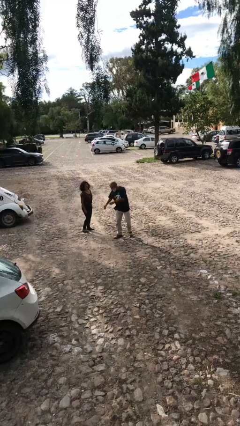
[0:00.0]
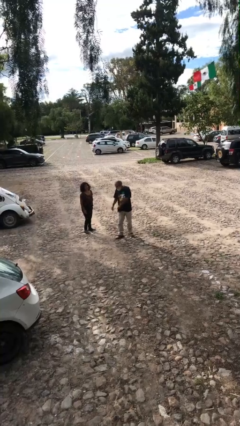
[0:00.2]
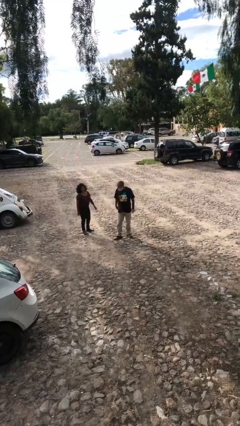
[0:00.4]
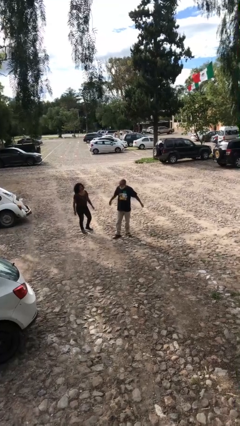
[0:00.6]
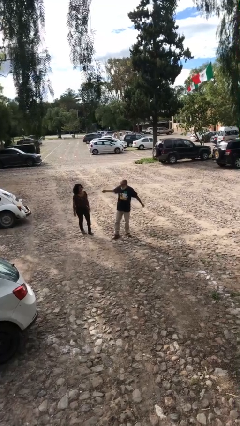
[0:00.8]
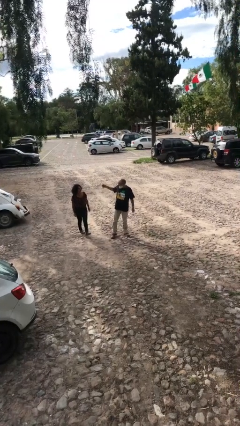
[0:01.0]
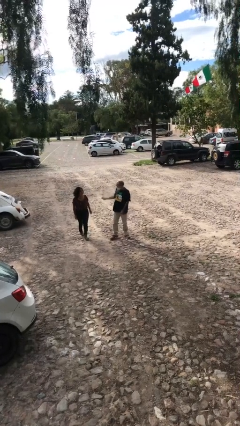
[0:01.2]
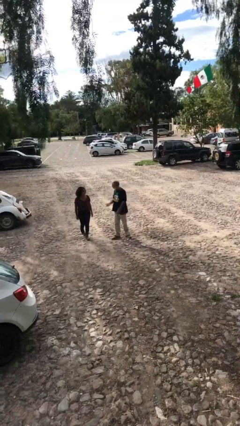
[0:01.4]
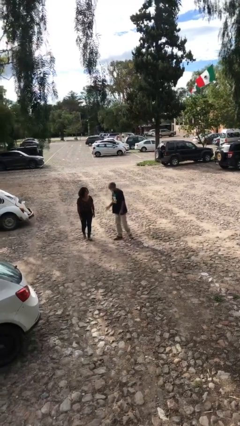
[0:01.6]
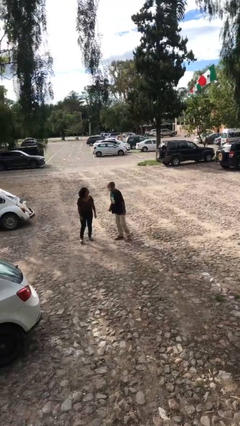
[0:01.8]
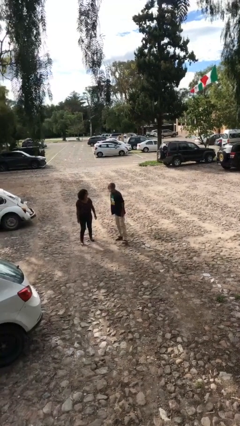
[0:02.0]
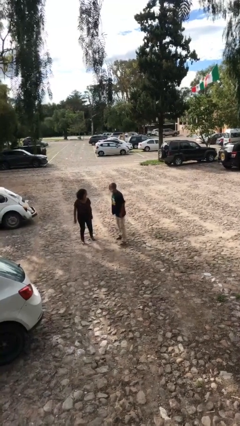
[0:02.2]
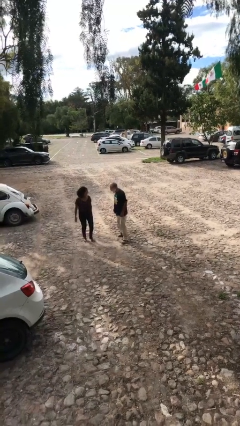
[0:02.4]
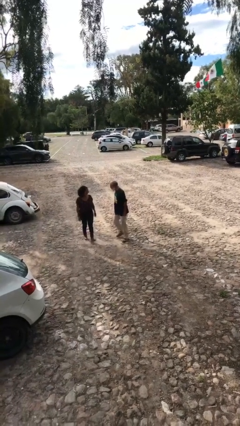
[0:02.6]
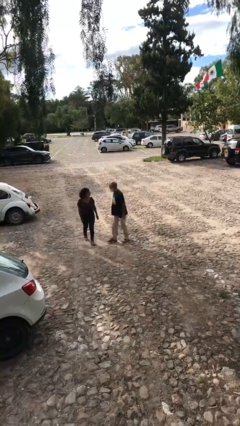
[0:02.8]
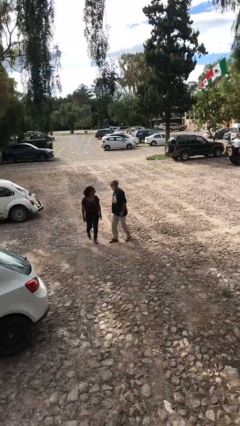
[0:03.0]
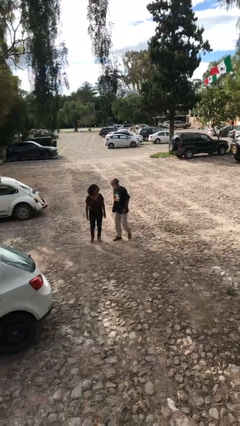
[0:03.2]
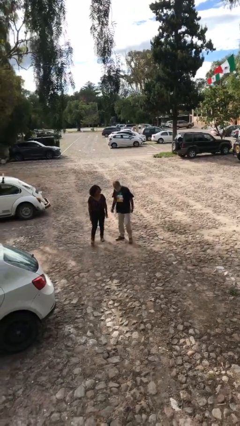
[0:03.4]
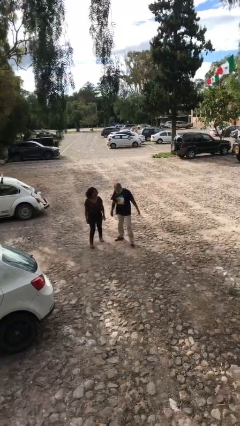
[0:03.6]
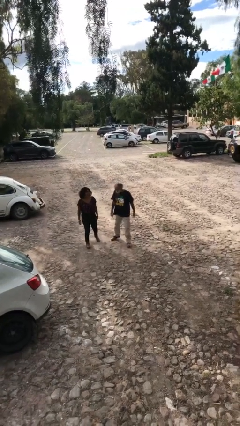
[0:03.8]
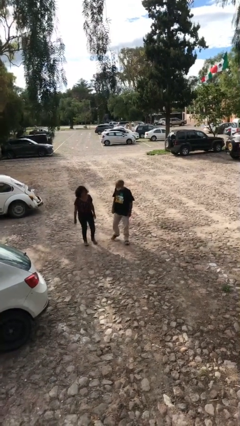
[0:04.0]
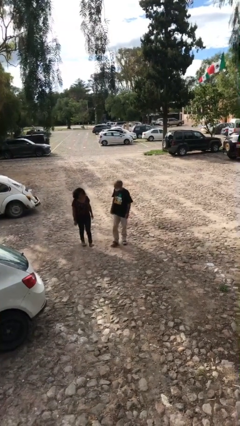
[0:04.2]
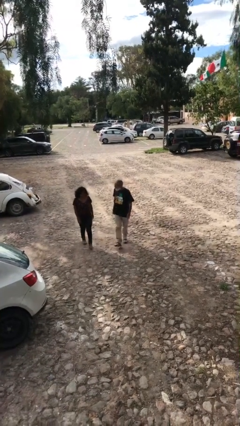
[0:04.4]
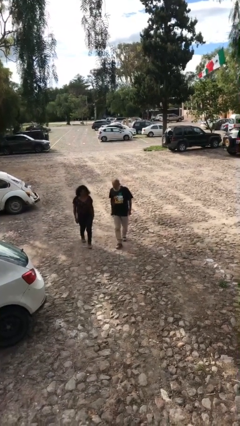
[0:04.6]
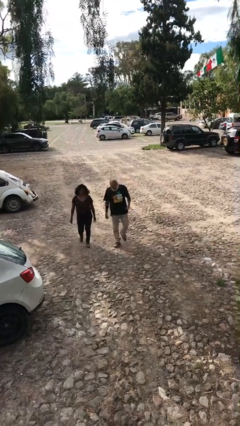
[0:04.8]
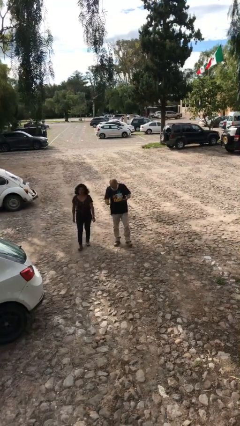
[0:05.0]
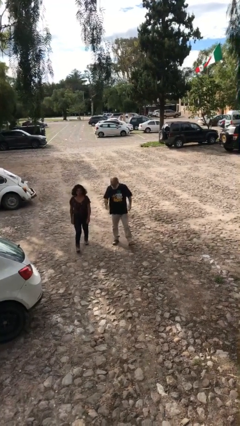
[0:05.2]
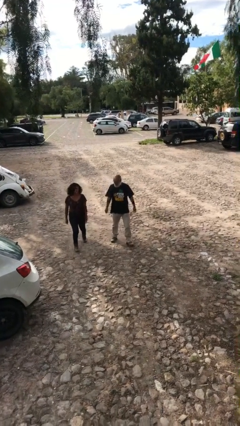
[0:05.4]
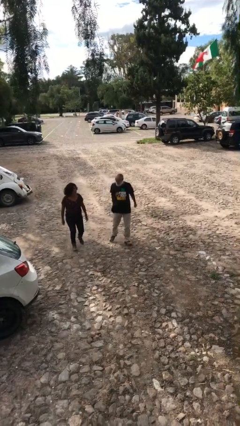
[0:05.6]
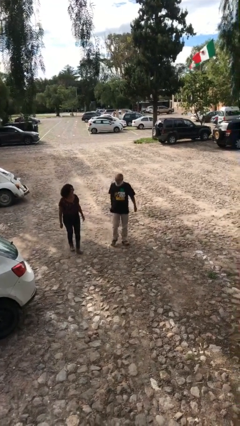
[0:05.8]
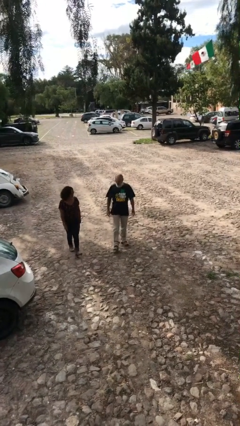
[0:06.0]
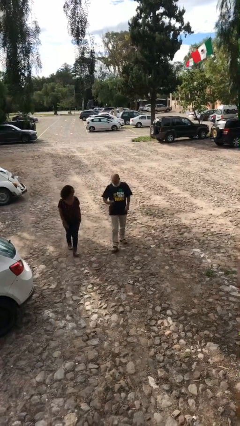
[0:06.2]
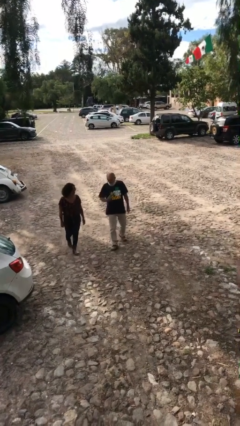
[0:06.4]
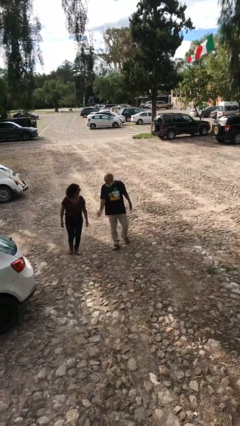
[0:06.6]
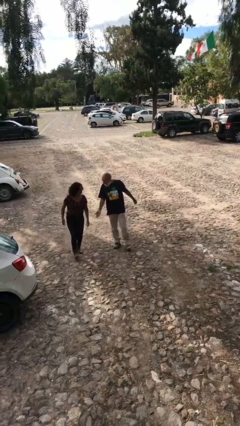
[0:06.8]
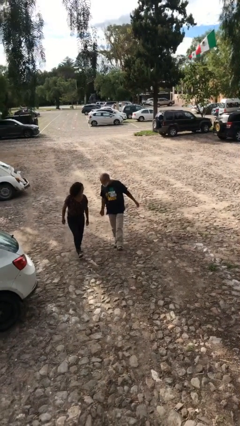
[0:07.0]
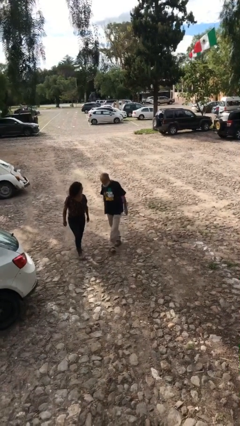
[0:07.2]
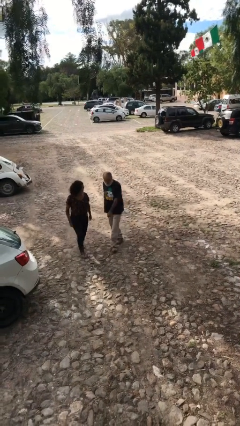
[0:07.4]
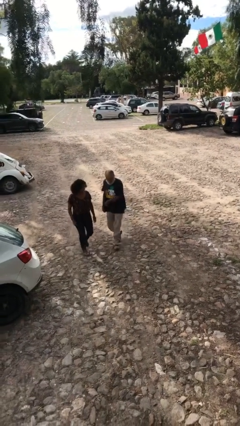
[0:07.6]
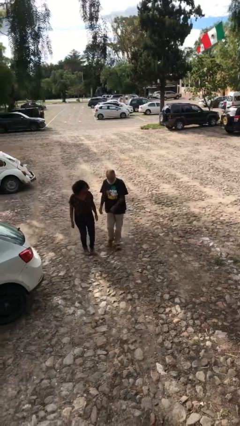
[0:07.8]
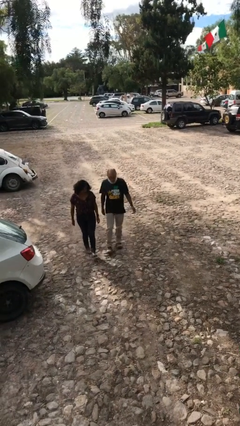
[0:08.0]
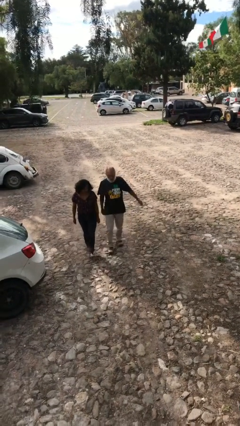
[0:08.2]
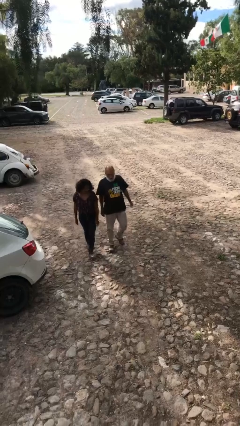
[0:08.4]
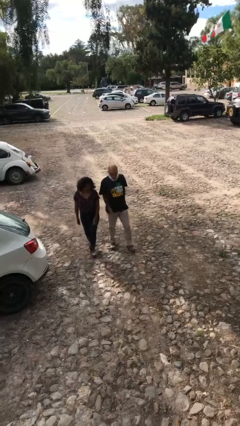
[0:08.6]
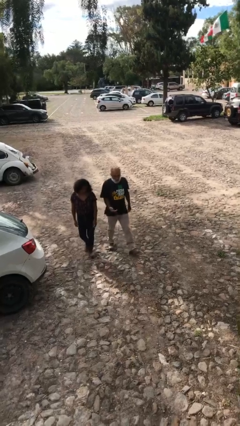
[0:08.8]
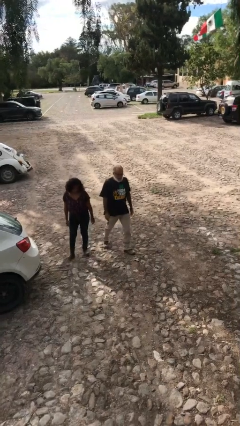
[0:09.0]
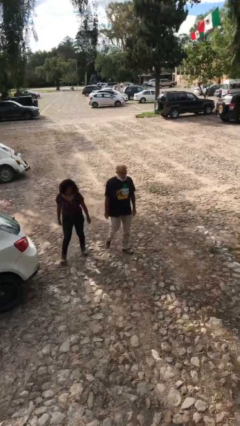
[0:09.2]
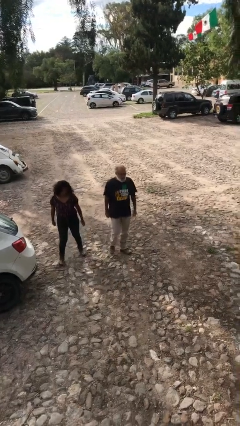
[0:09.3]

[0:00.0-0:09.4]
person talks to person

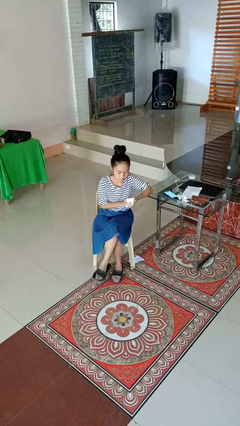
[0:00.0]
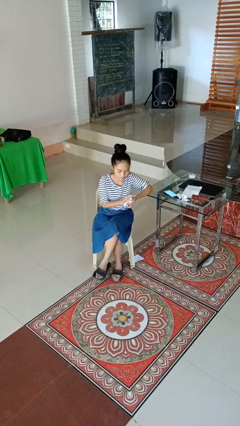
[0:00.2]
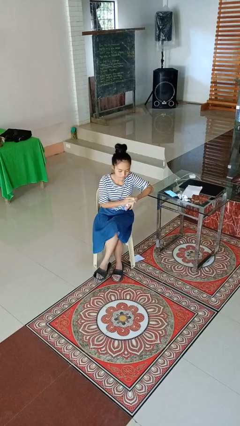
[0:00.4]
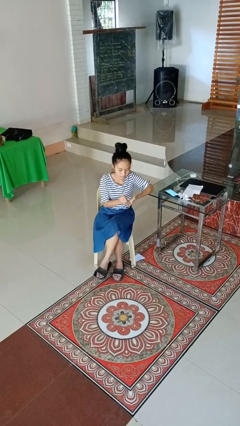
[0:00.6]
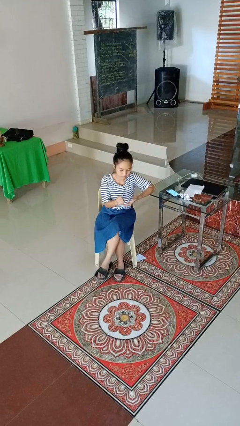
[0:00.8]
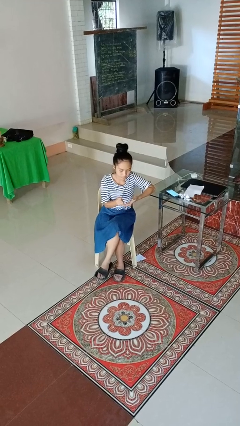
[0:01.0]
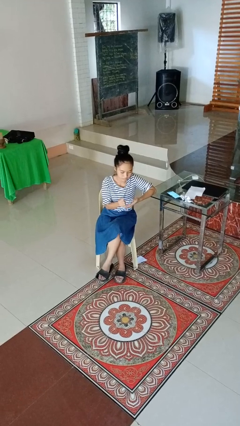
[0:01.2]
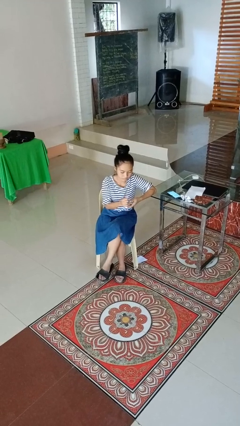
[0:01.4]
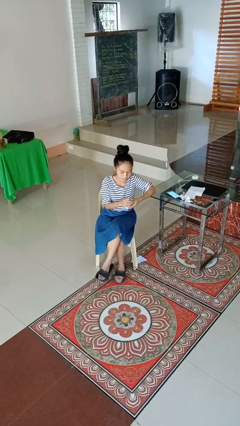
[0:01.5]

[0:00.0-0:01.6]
person crumples paper

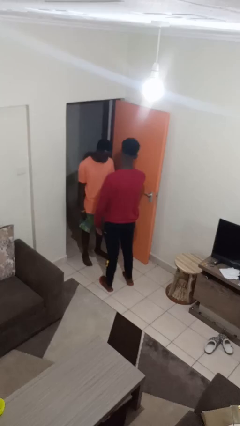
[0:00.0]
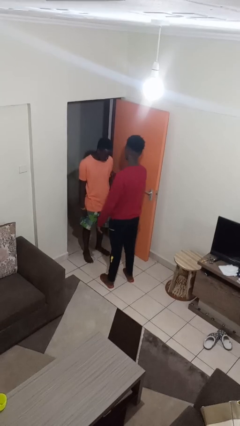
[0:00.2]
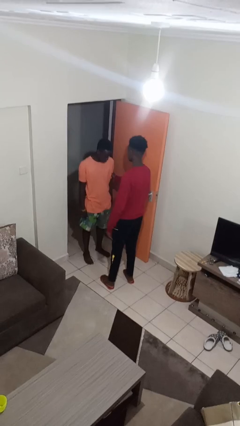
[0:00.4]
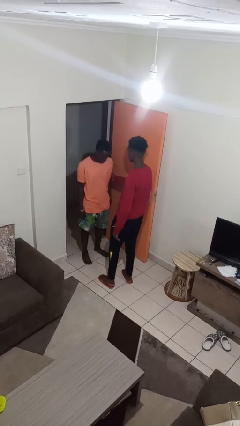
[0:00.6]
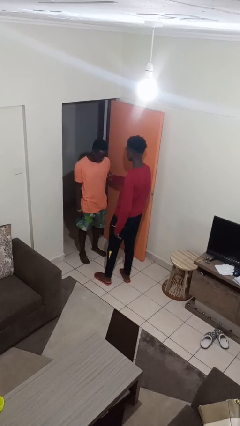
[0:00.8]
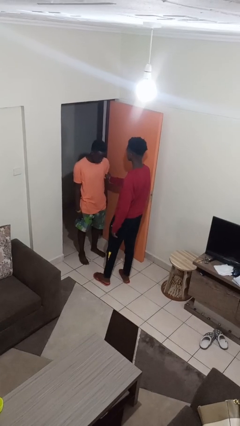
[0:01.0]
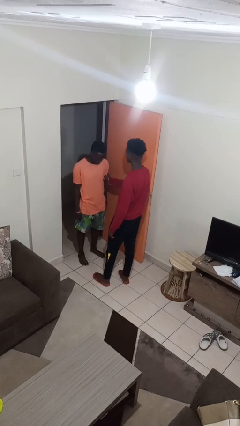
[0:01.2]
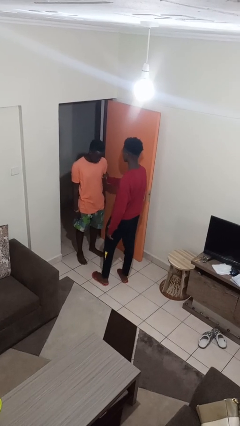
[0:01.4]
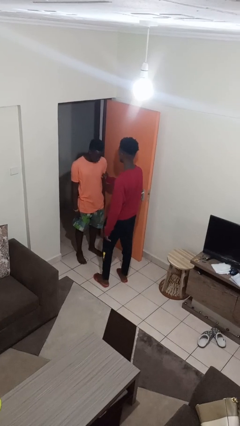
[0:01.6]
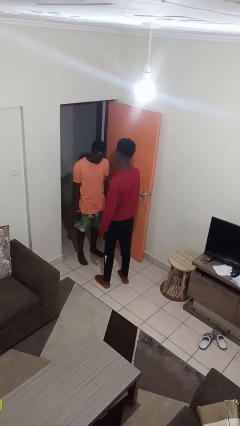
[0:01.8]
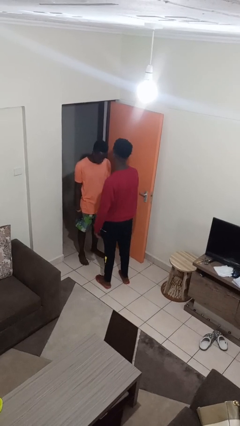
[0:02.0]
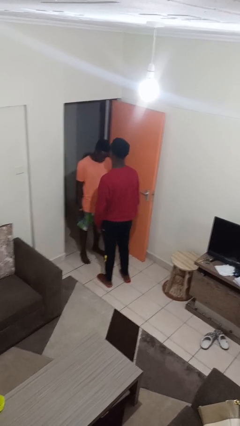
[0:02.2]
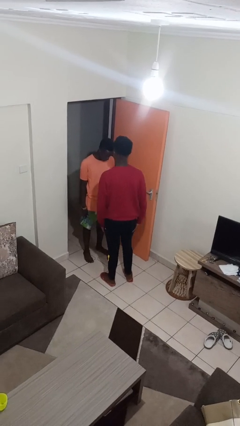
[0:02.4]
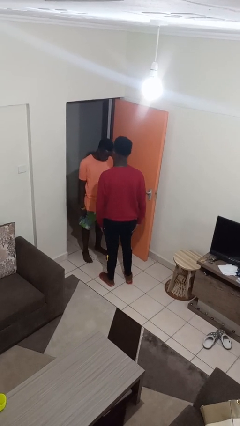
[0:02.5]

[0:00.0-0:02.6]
person grabs person by bicep

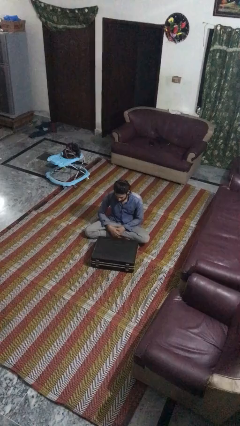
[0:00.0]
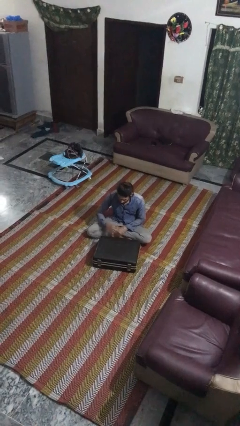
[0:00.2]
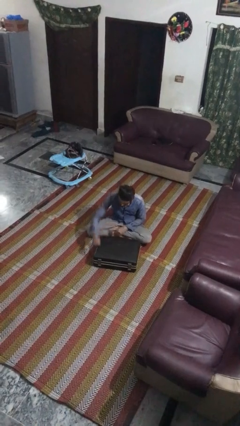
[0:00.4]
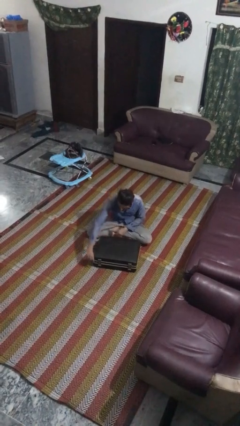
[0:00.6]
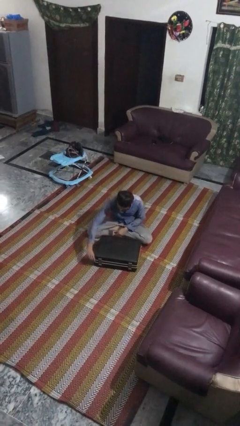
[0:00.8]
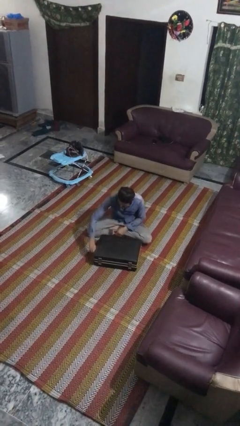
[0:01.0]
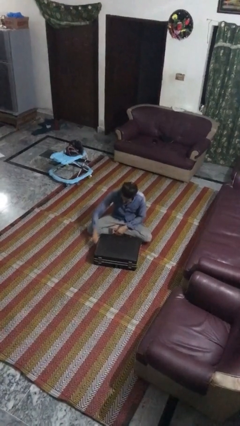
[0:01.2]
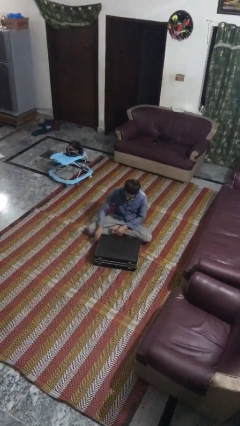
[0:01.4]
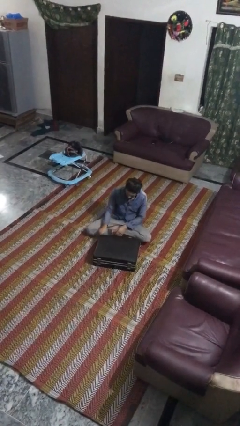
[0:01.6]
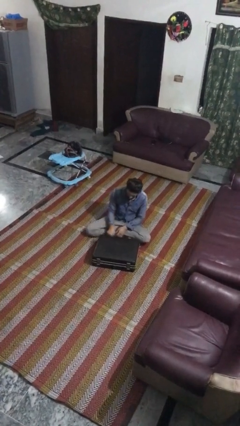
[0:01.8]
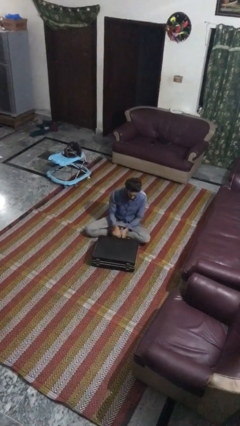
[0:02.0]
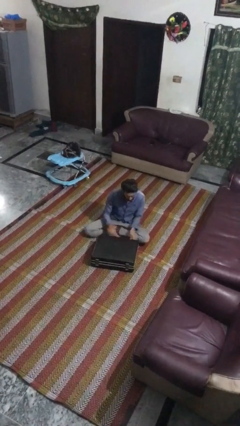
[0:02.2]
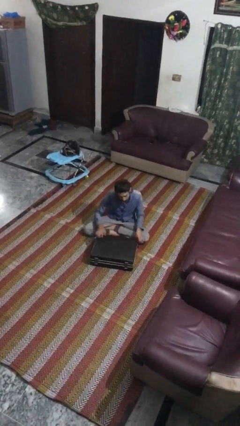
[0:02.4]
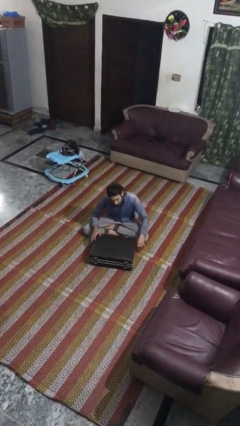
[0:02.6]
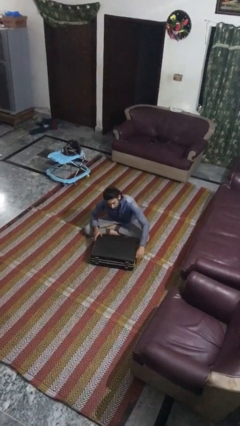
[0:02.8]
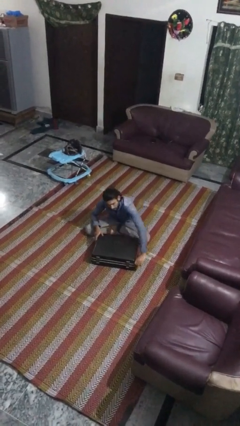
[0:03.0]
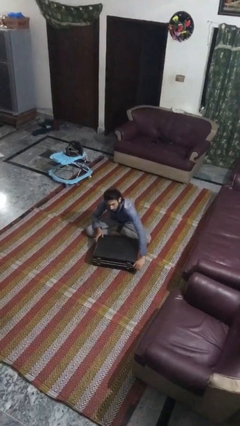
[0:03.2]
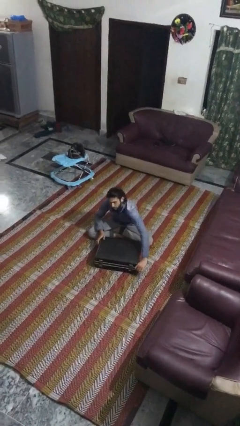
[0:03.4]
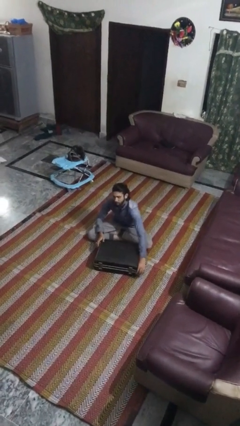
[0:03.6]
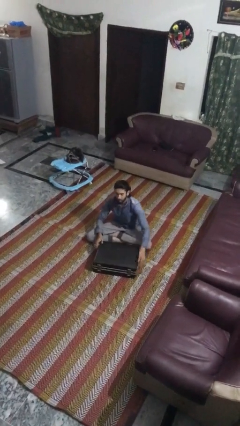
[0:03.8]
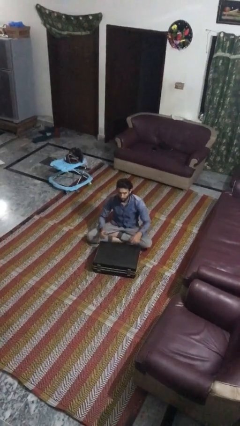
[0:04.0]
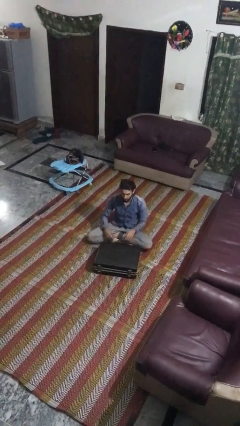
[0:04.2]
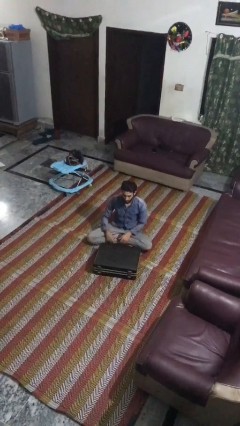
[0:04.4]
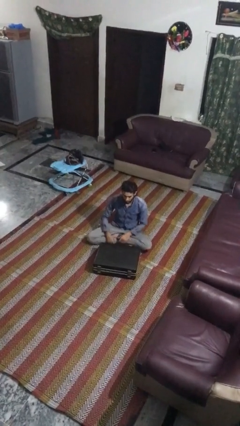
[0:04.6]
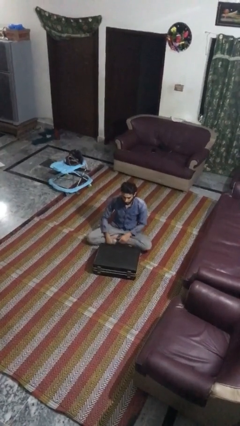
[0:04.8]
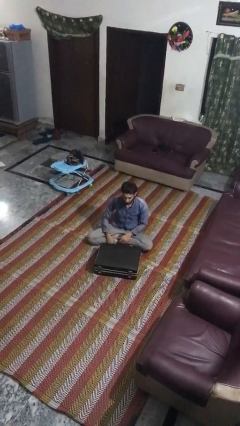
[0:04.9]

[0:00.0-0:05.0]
person opens suitcase
